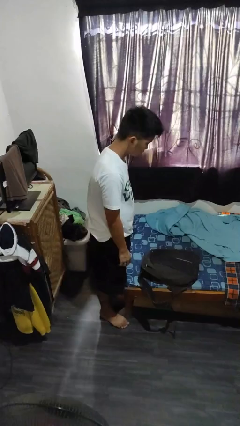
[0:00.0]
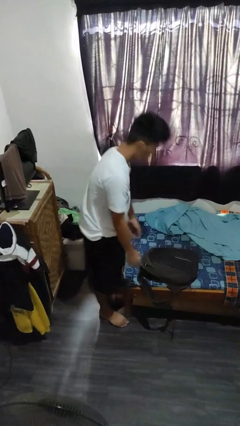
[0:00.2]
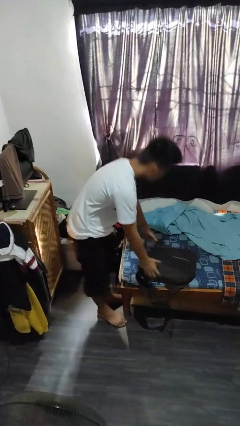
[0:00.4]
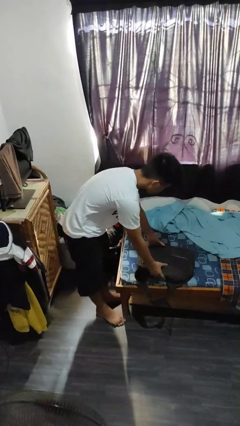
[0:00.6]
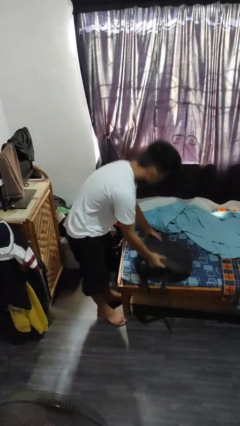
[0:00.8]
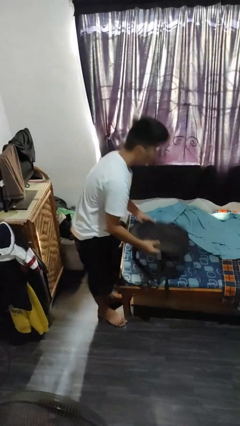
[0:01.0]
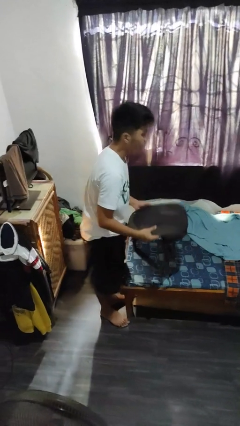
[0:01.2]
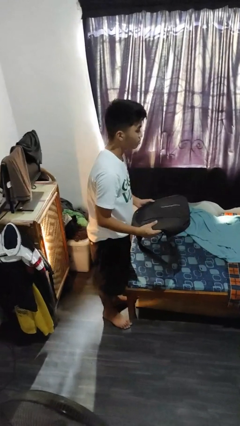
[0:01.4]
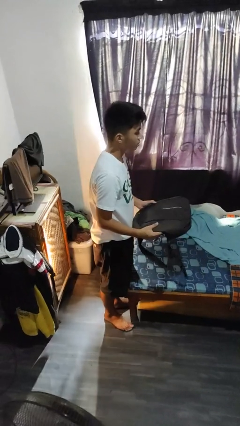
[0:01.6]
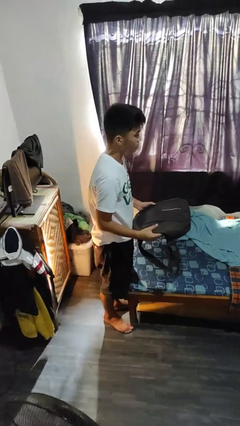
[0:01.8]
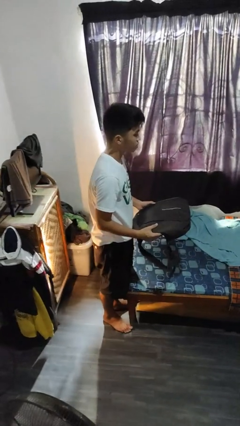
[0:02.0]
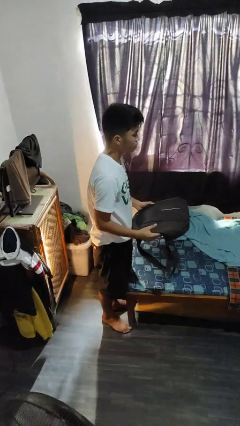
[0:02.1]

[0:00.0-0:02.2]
person picks up object from bed

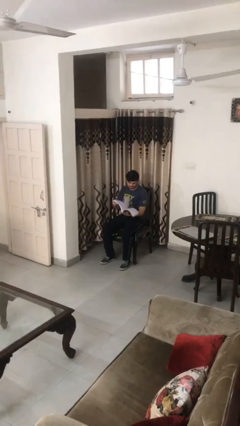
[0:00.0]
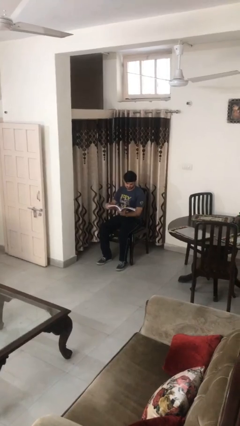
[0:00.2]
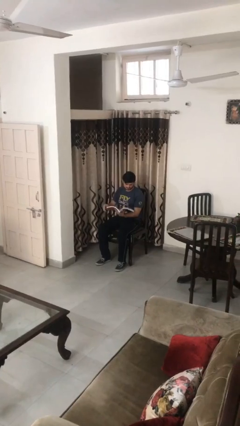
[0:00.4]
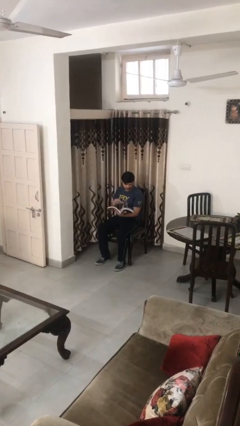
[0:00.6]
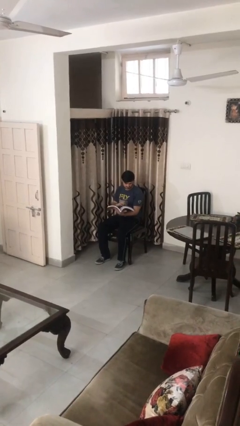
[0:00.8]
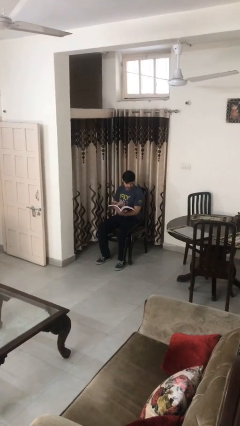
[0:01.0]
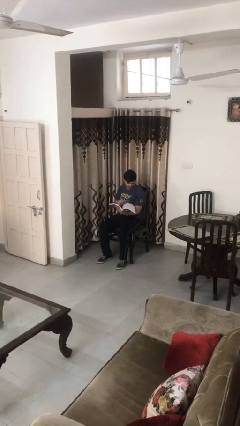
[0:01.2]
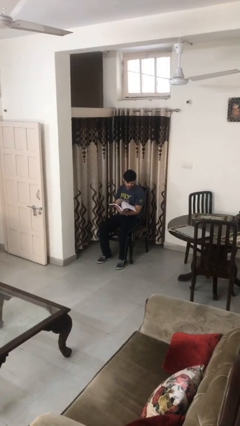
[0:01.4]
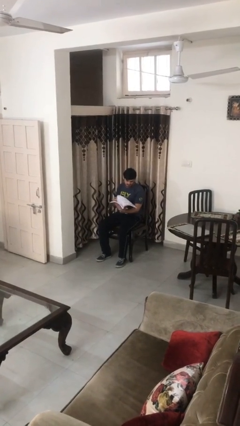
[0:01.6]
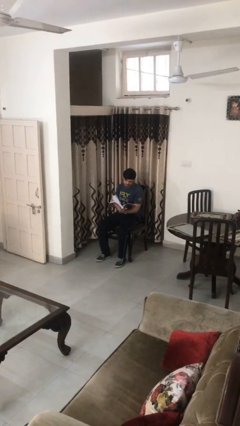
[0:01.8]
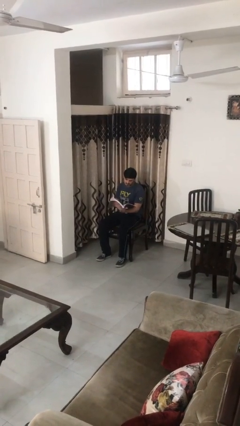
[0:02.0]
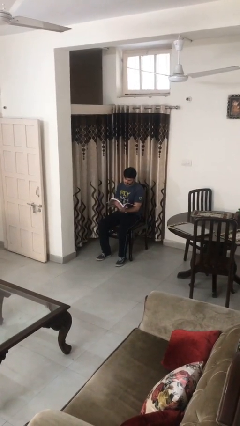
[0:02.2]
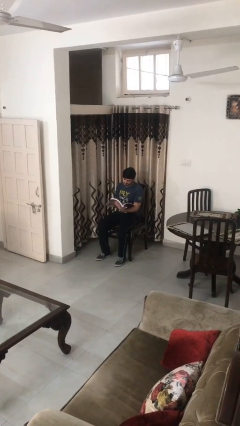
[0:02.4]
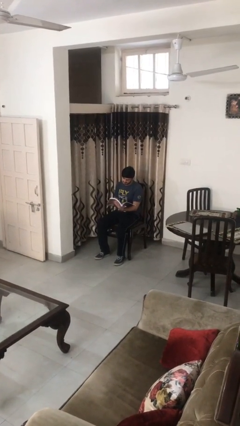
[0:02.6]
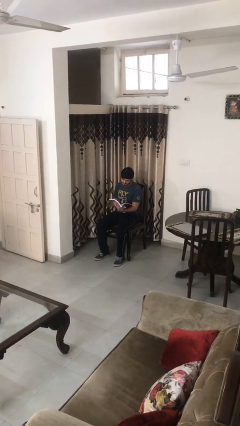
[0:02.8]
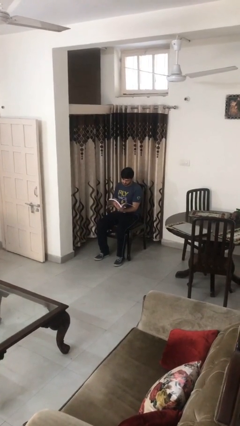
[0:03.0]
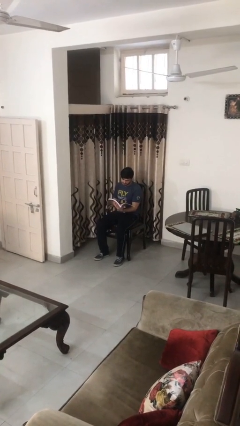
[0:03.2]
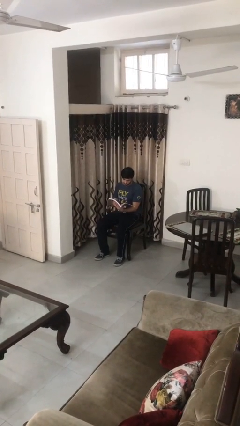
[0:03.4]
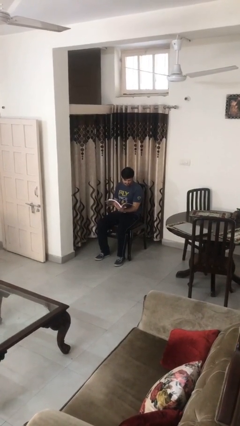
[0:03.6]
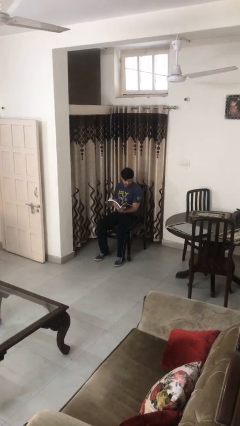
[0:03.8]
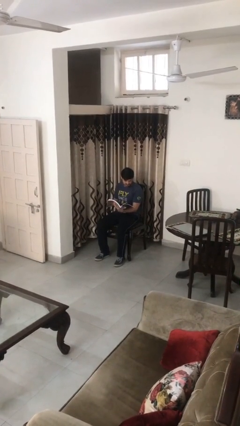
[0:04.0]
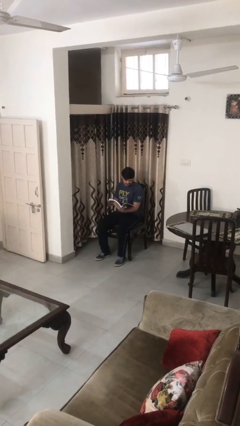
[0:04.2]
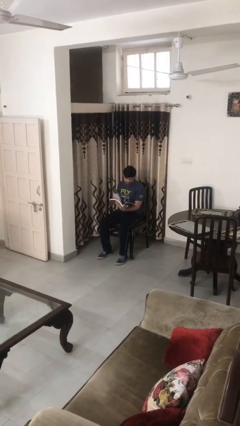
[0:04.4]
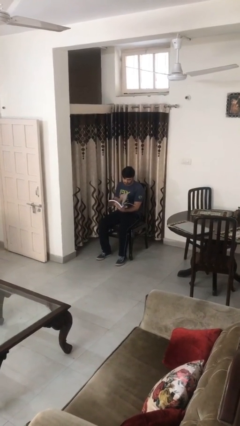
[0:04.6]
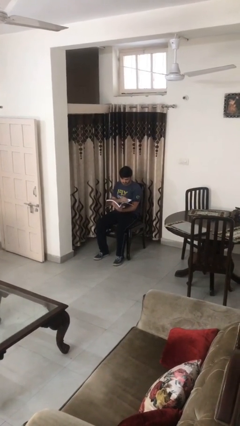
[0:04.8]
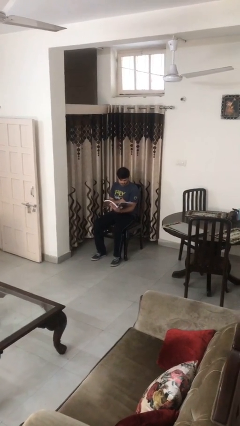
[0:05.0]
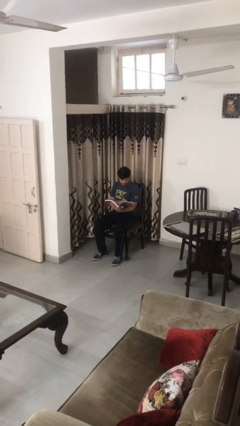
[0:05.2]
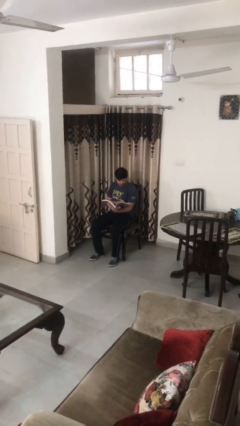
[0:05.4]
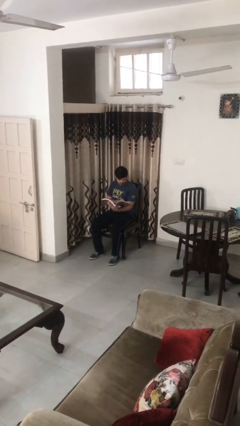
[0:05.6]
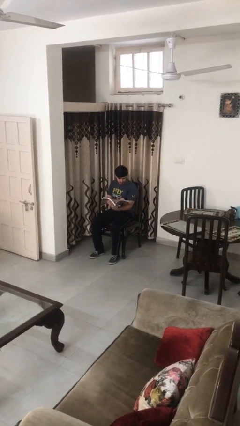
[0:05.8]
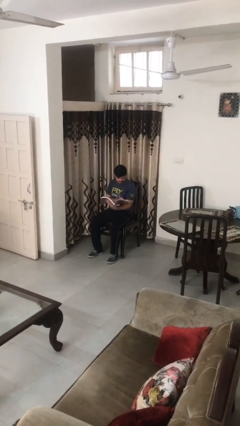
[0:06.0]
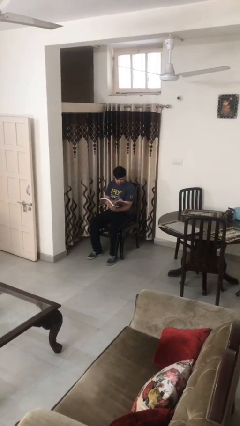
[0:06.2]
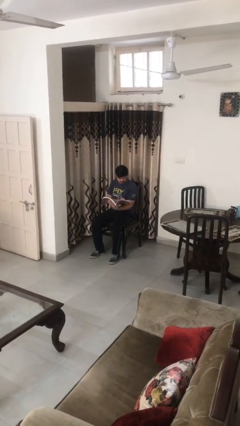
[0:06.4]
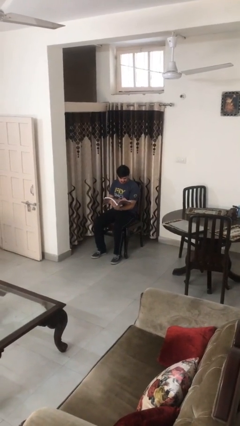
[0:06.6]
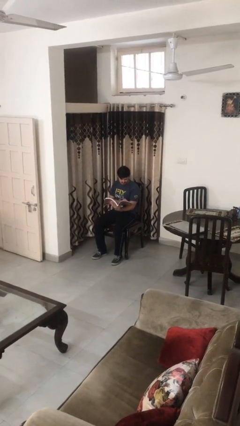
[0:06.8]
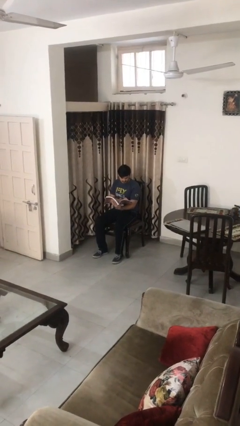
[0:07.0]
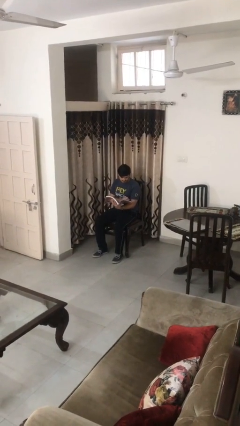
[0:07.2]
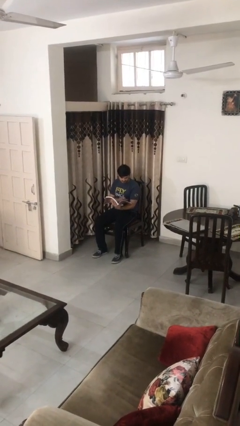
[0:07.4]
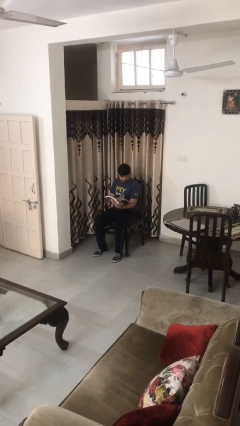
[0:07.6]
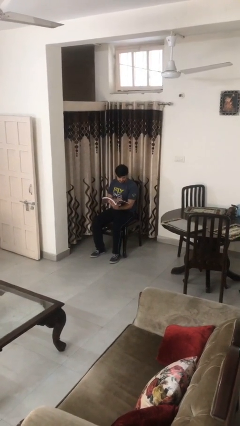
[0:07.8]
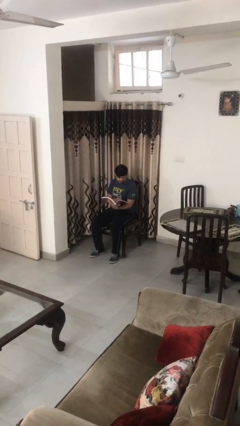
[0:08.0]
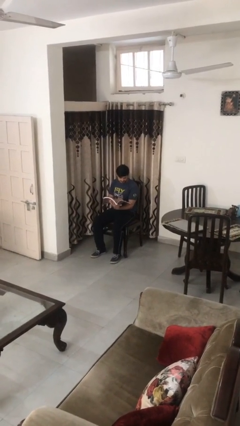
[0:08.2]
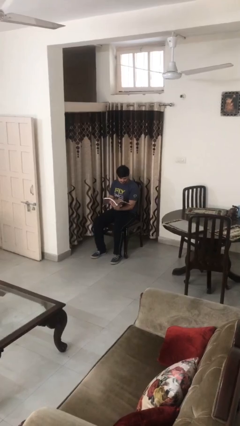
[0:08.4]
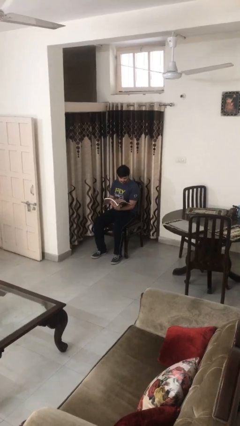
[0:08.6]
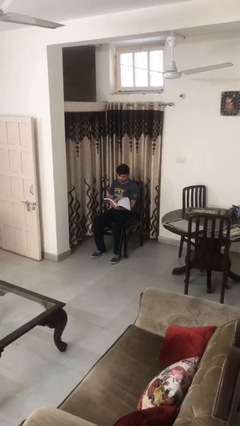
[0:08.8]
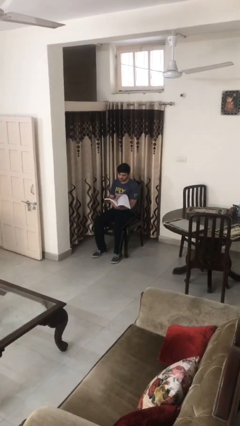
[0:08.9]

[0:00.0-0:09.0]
person reads document

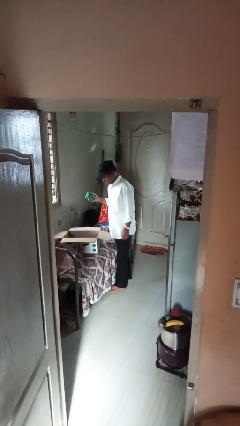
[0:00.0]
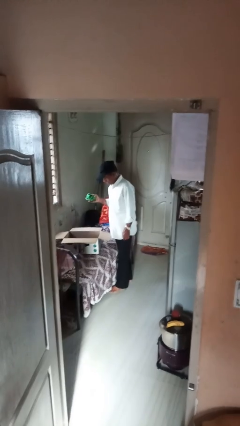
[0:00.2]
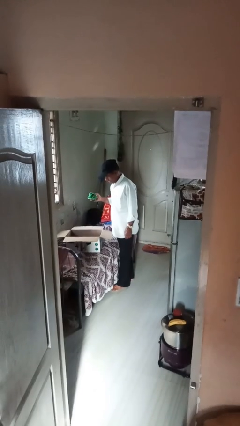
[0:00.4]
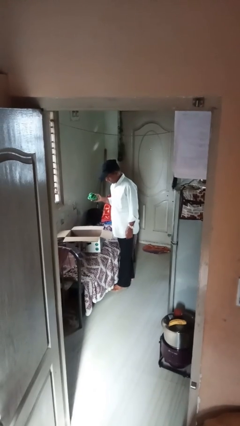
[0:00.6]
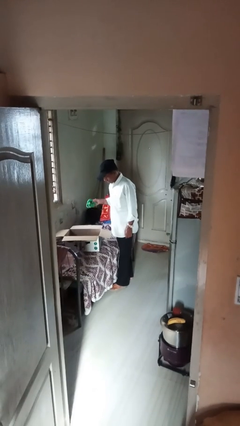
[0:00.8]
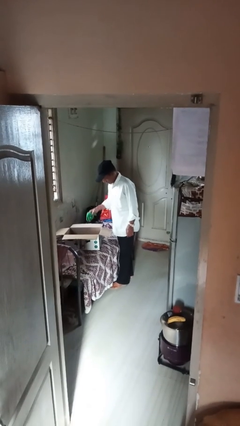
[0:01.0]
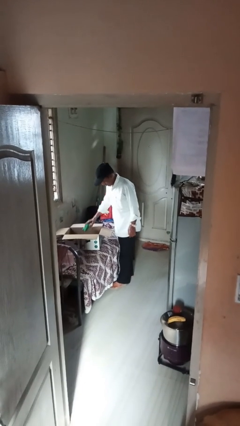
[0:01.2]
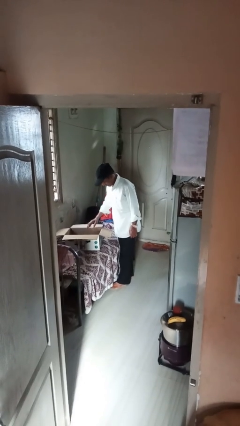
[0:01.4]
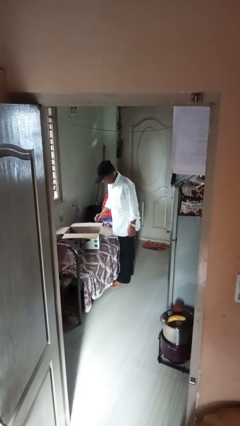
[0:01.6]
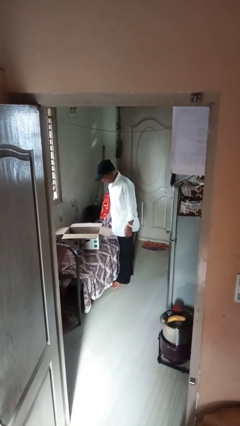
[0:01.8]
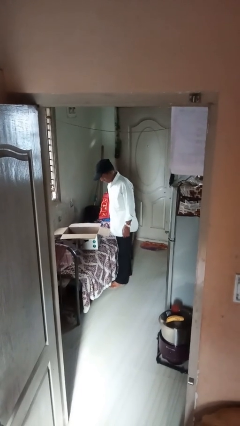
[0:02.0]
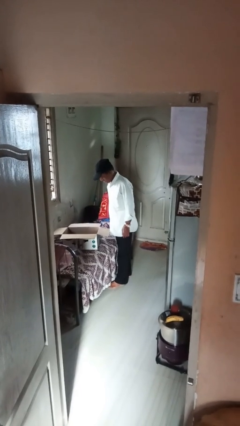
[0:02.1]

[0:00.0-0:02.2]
person puts object into box

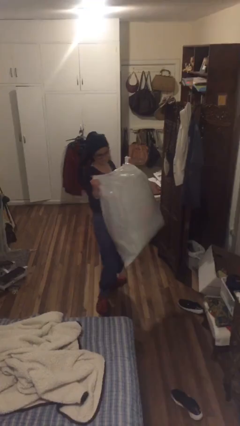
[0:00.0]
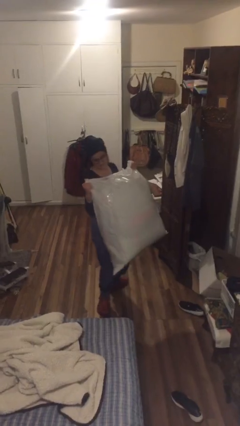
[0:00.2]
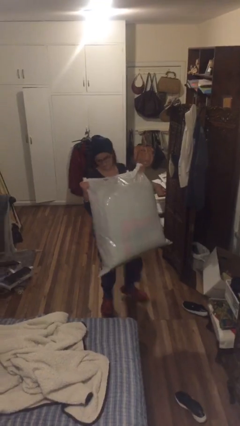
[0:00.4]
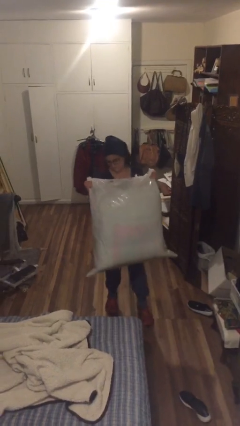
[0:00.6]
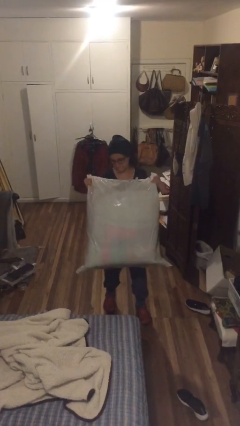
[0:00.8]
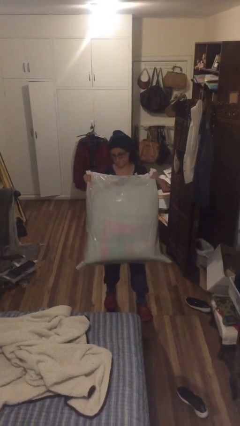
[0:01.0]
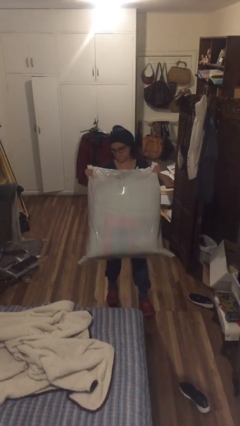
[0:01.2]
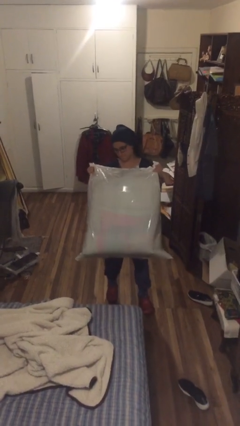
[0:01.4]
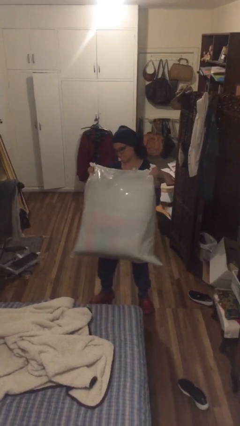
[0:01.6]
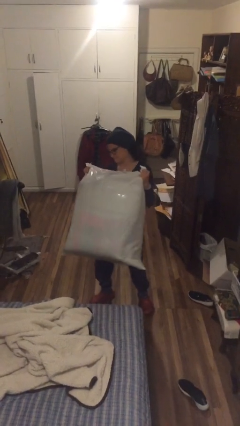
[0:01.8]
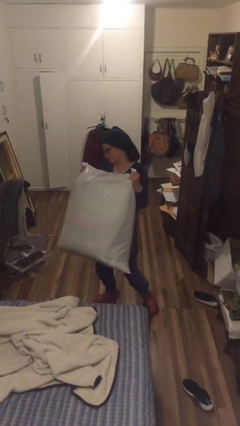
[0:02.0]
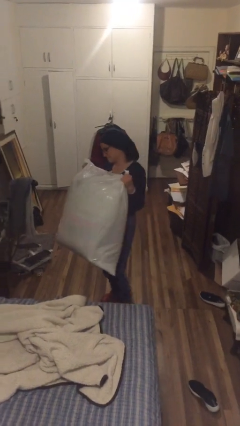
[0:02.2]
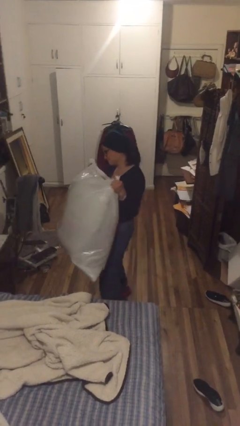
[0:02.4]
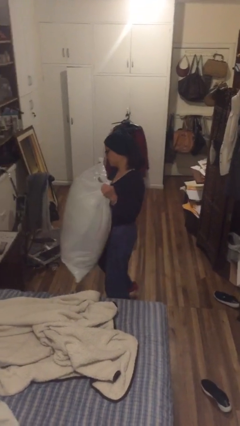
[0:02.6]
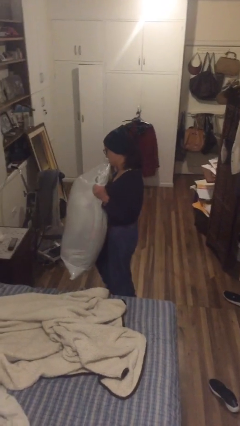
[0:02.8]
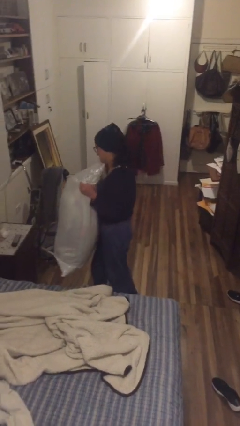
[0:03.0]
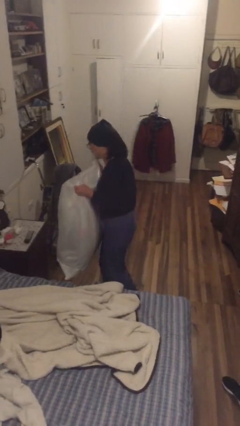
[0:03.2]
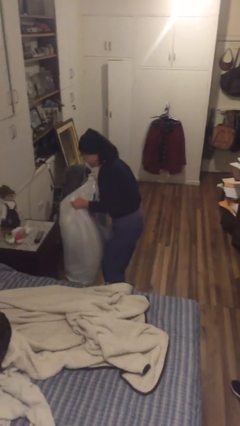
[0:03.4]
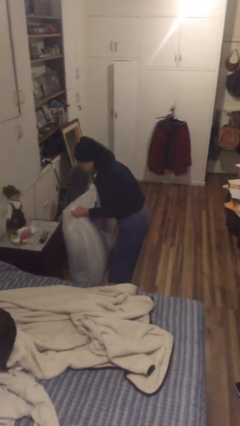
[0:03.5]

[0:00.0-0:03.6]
person carries heavy object

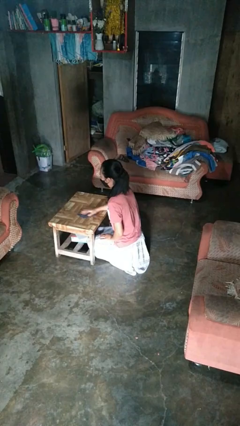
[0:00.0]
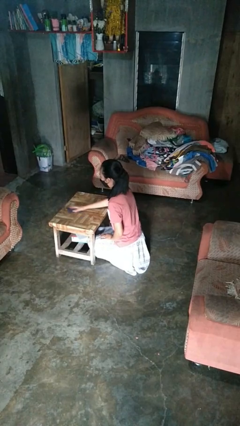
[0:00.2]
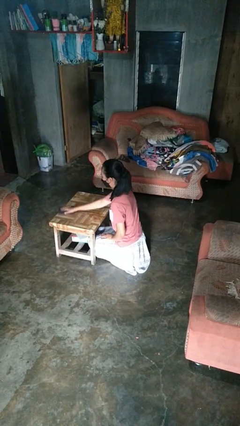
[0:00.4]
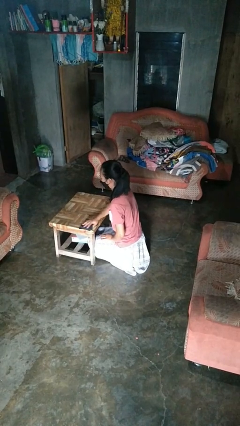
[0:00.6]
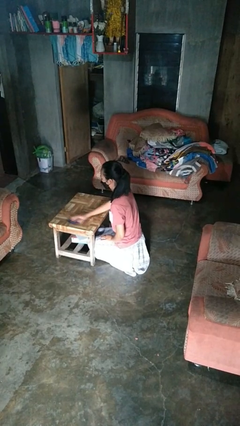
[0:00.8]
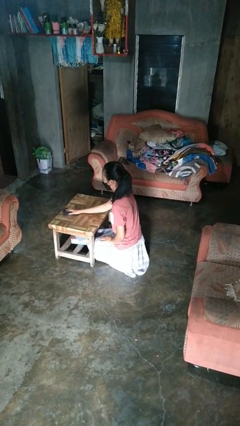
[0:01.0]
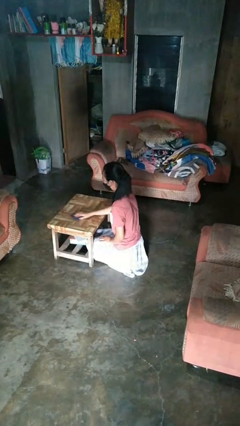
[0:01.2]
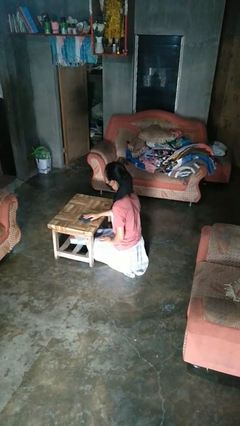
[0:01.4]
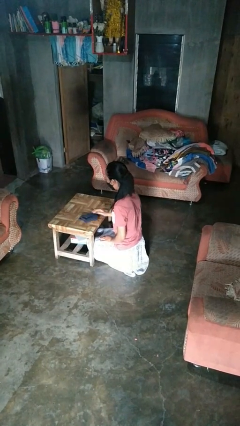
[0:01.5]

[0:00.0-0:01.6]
person cleans table with rag
